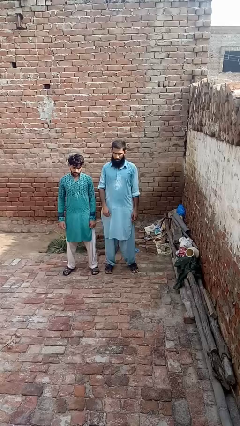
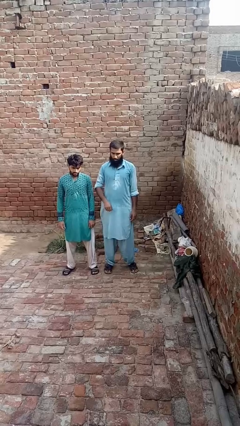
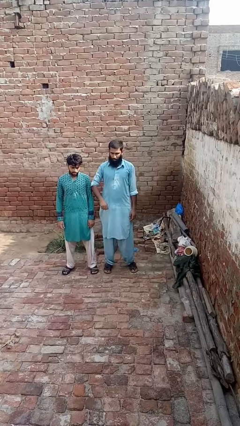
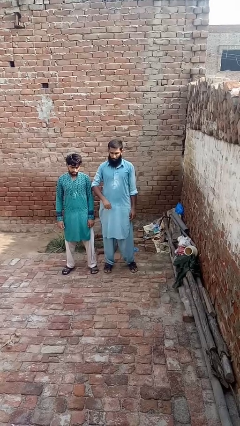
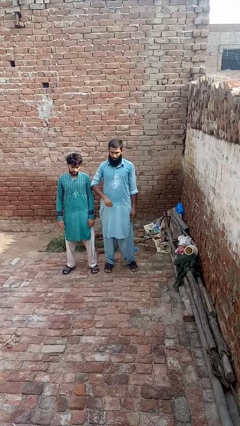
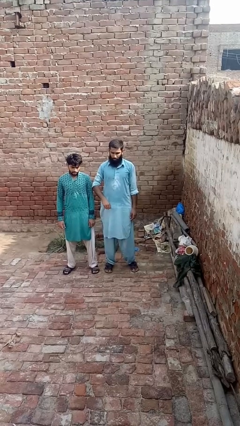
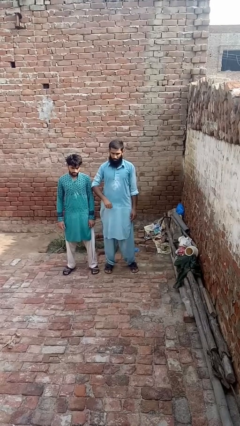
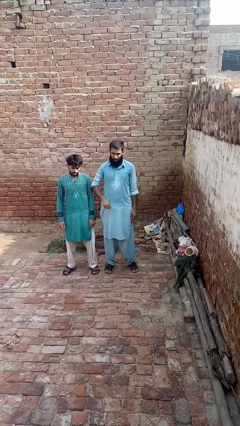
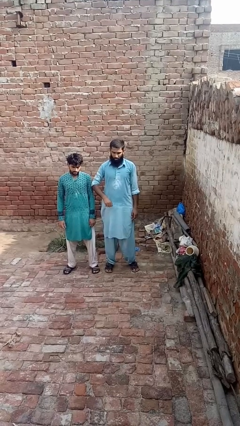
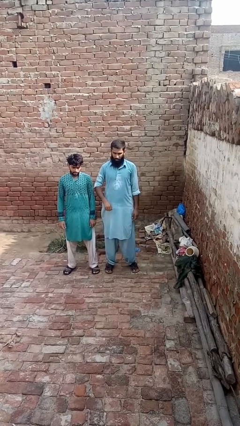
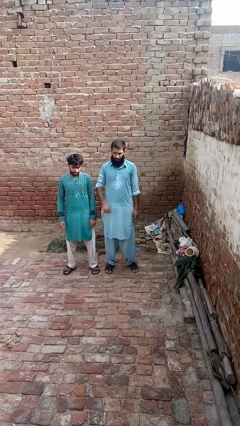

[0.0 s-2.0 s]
person nudges person with elbow

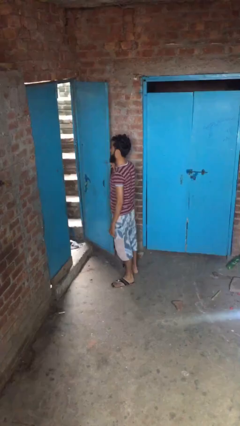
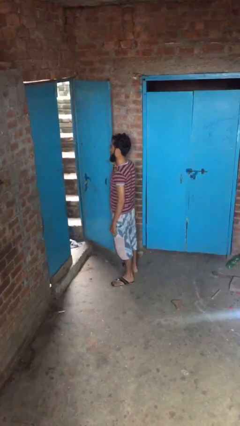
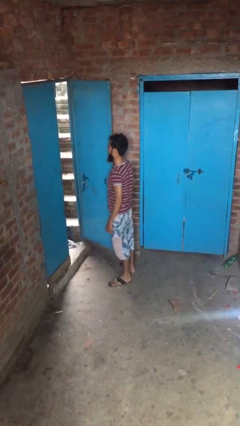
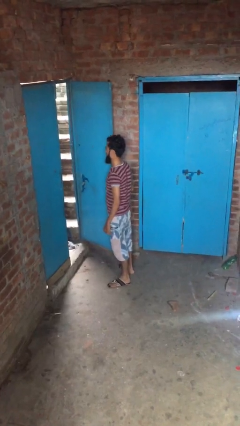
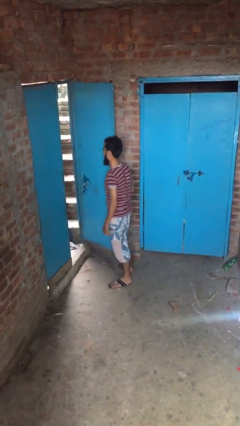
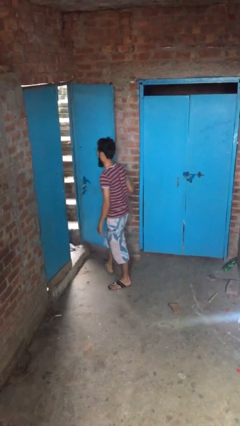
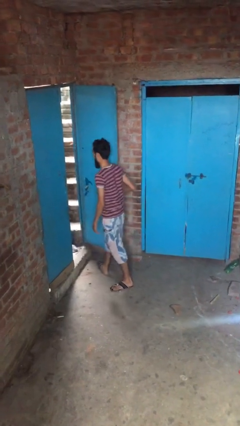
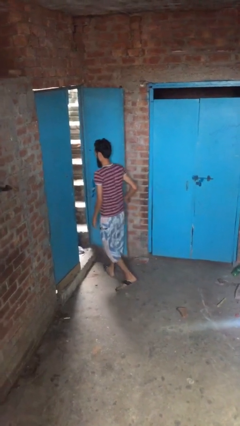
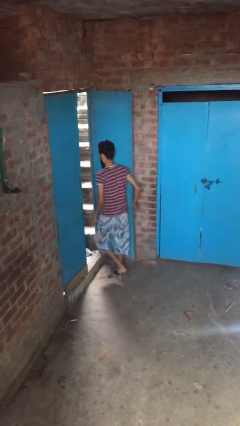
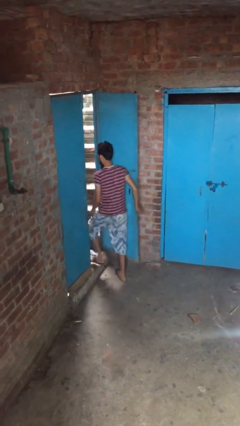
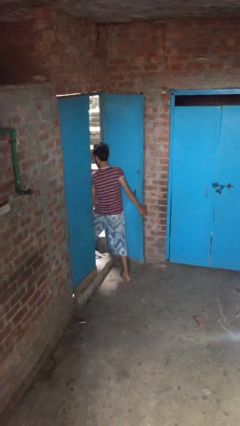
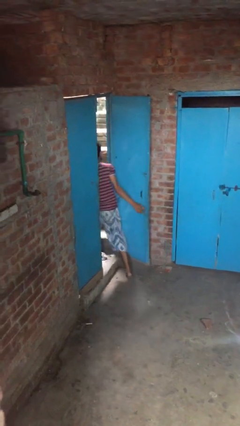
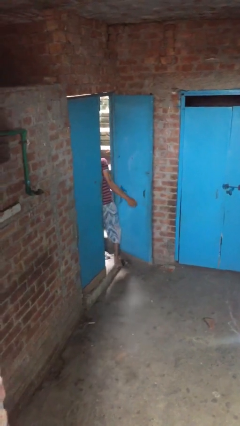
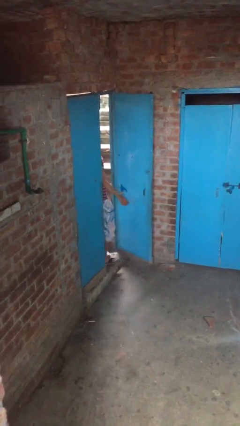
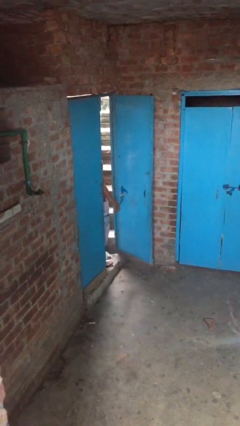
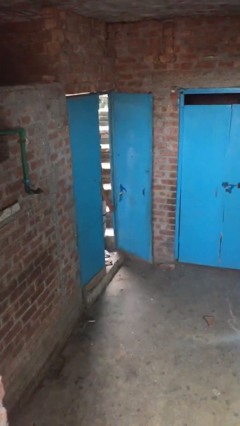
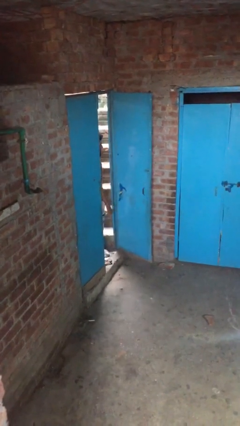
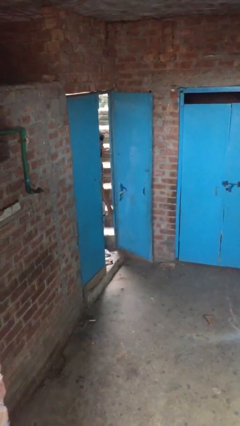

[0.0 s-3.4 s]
person exits scene through structure

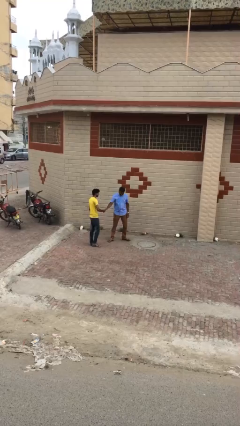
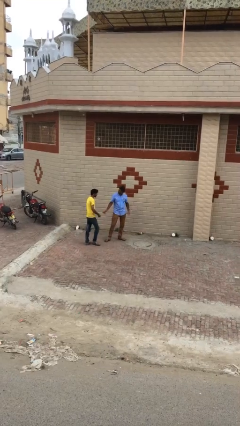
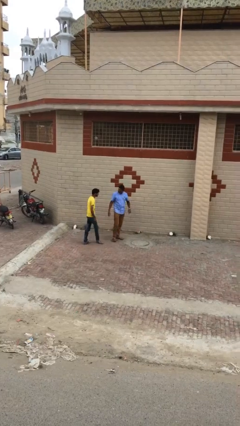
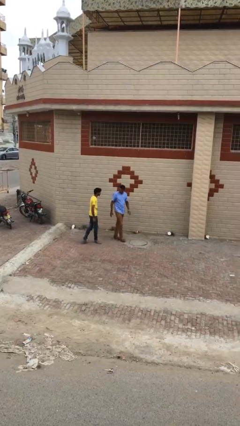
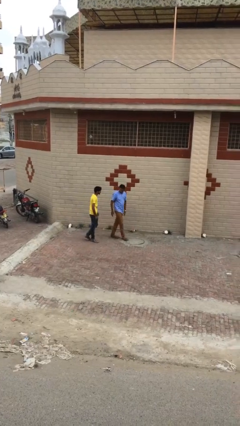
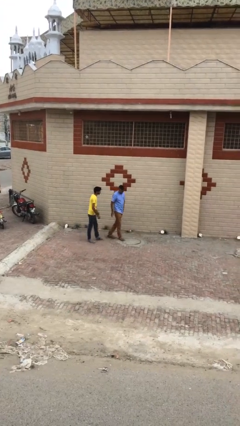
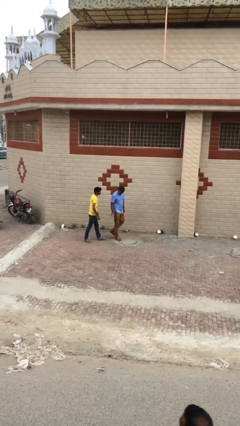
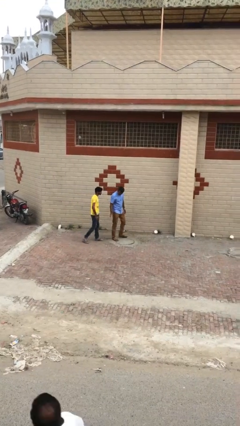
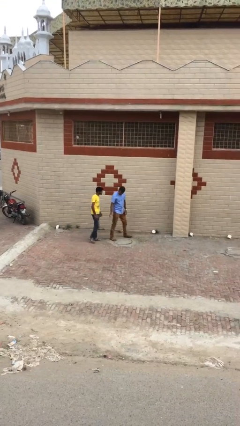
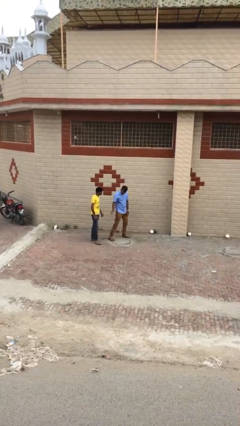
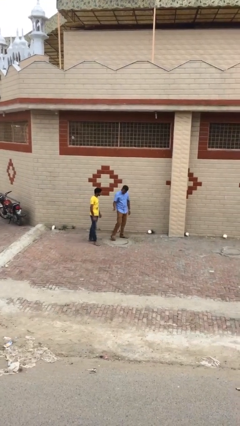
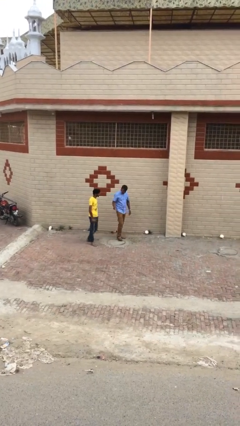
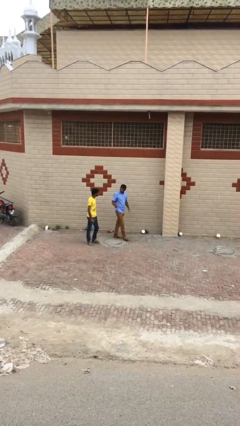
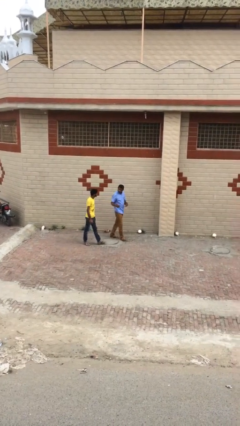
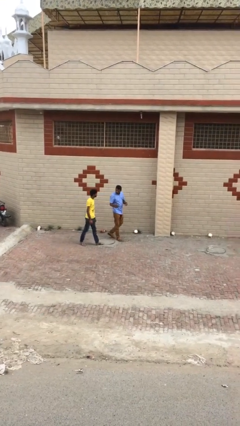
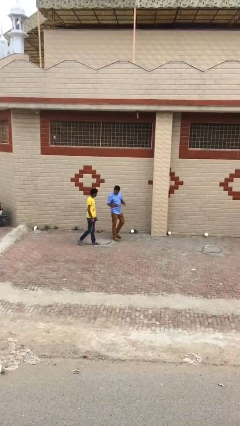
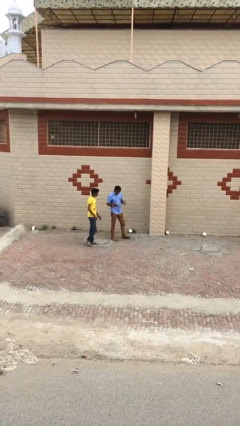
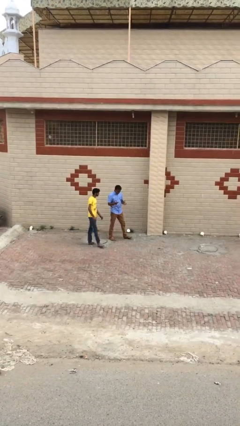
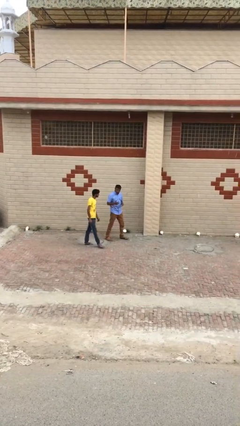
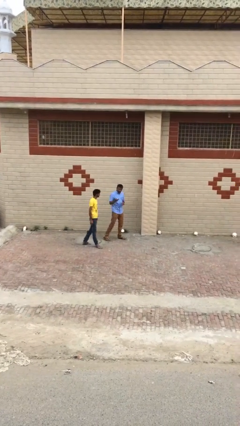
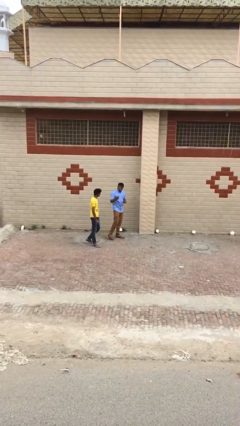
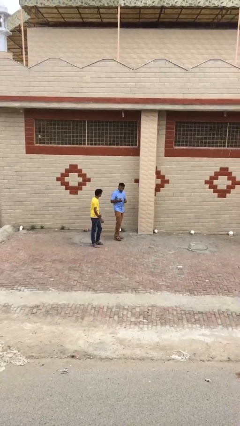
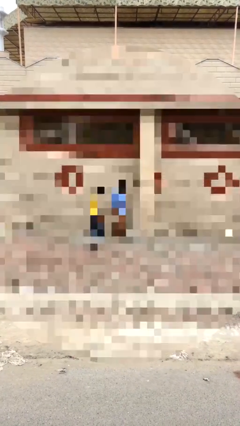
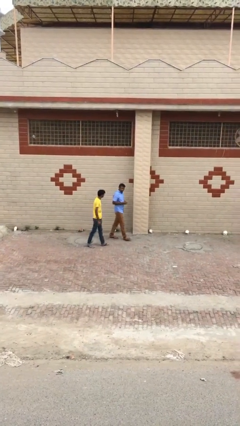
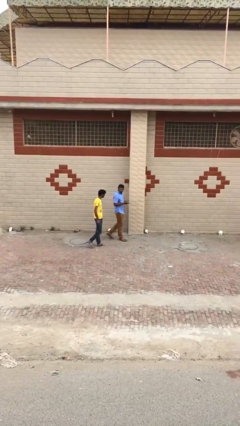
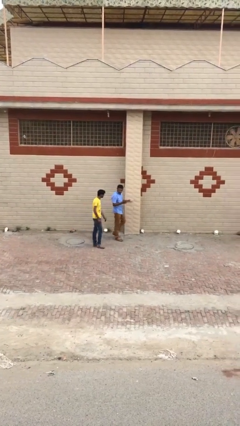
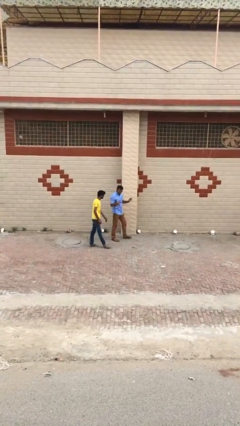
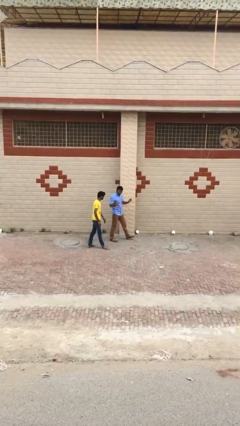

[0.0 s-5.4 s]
person talks to person

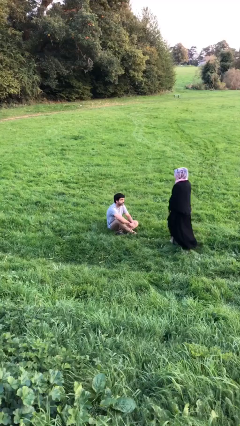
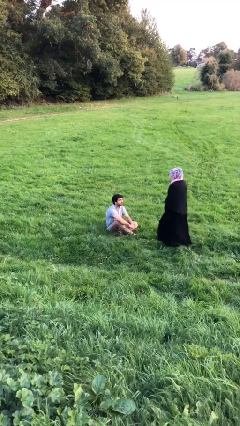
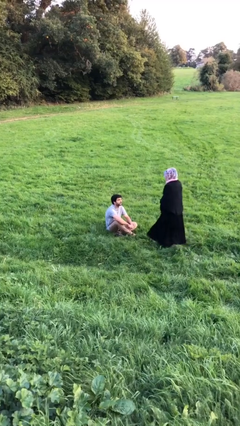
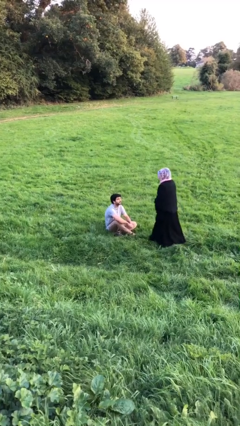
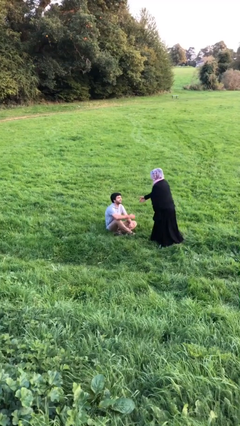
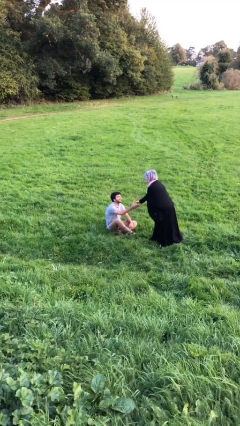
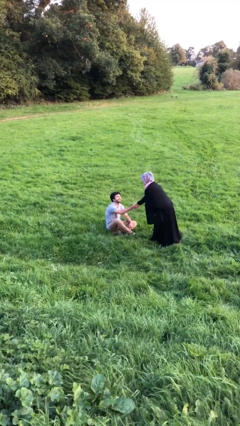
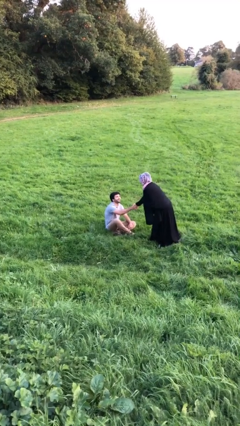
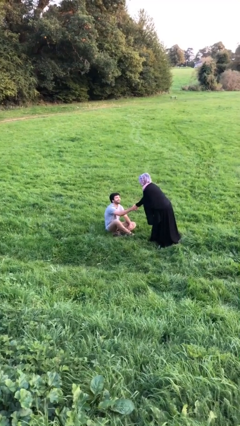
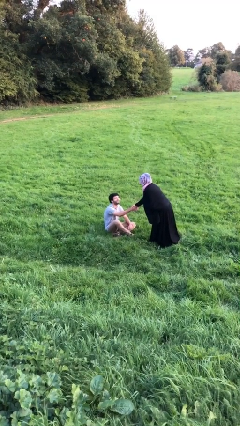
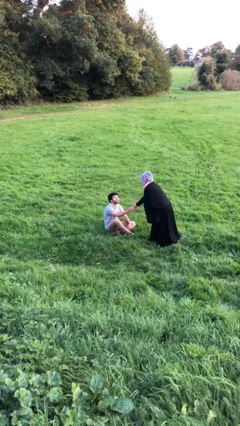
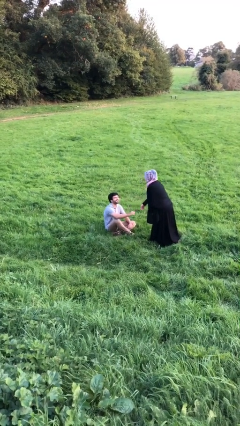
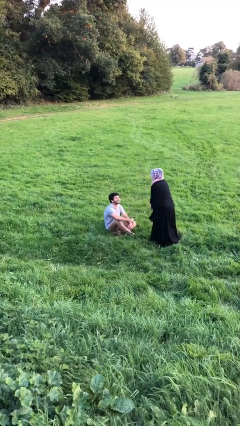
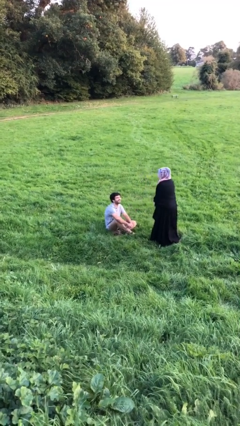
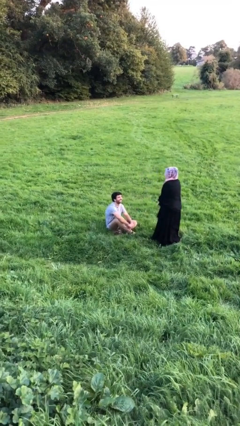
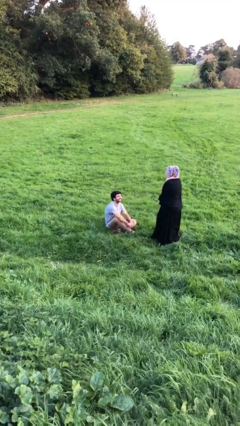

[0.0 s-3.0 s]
person shakes hand

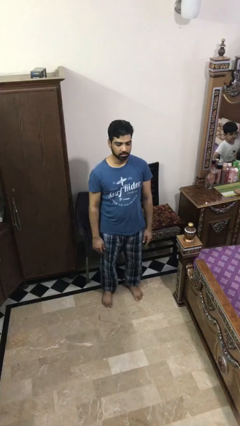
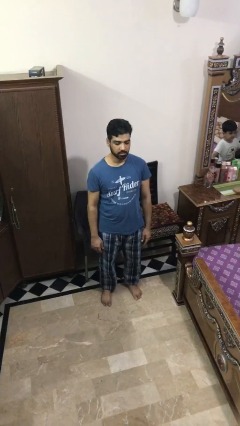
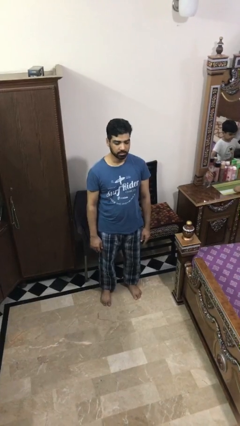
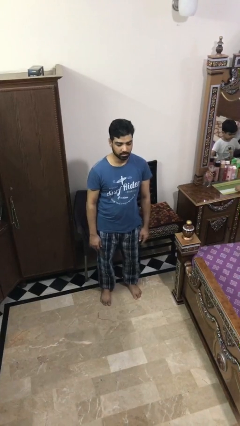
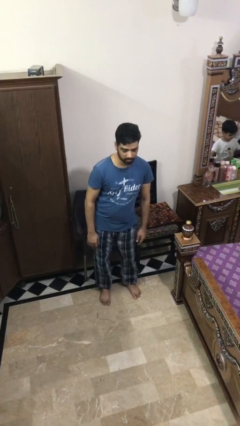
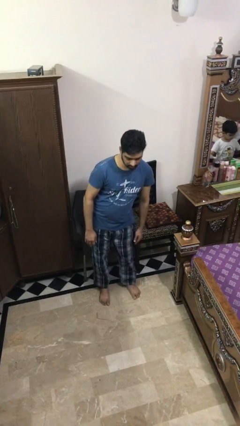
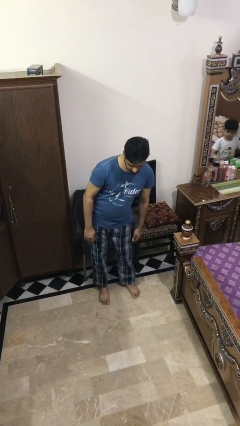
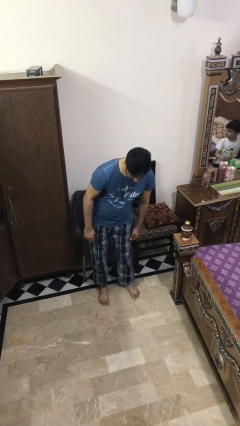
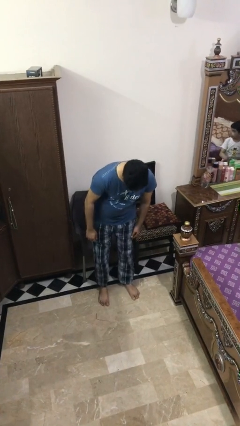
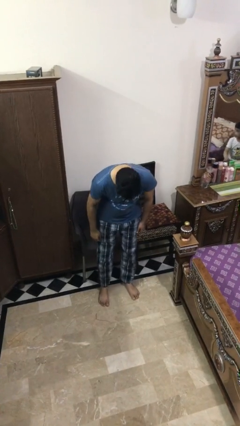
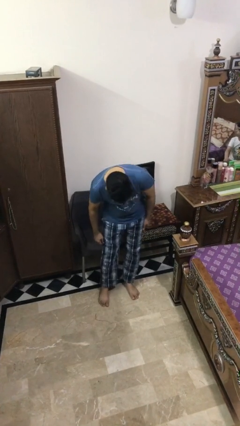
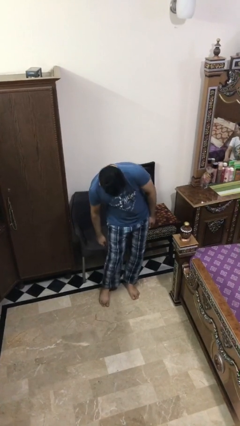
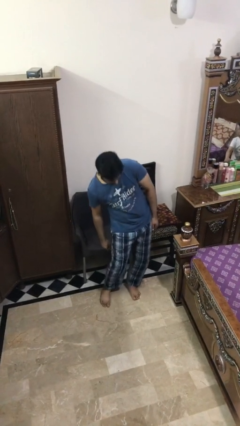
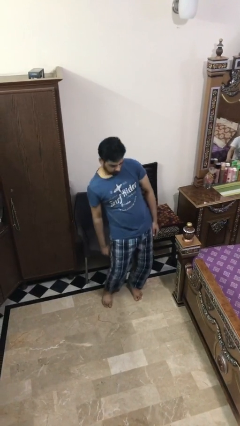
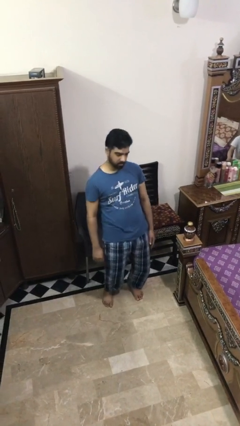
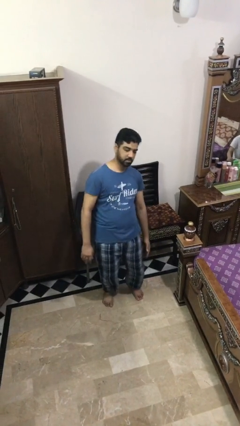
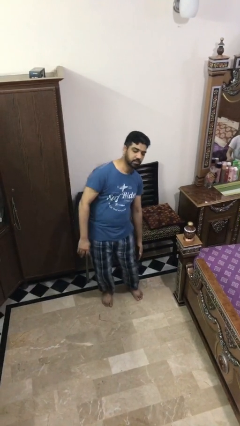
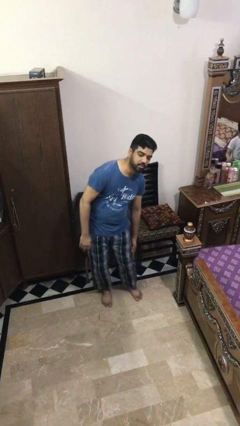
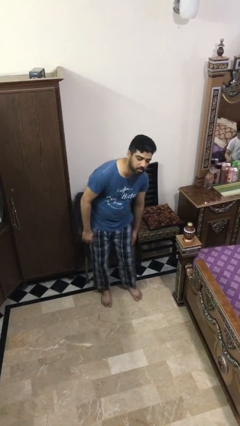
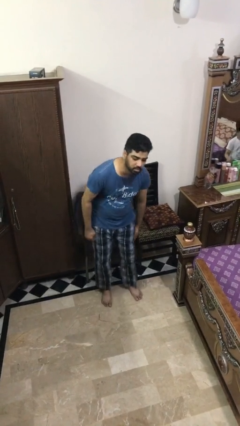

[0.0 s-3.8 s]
person wiggles hips
